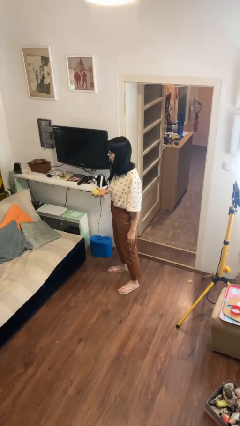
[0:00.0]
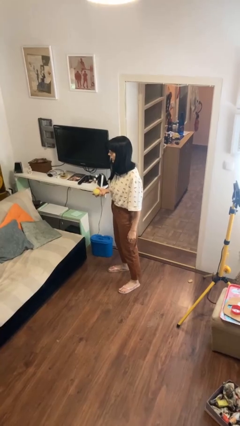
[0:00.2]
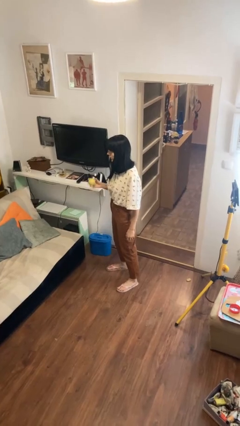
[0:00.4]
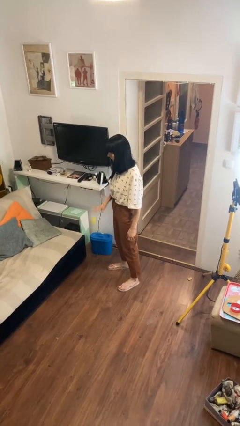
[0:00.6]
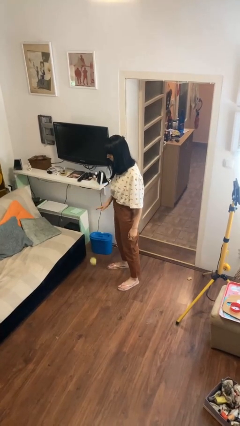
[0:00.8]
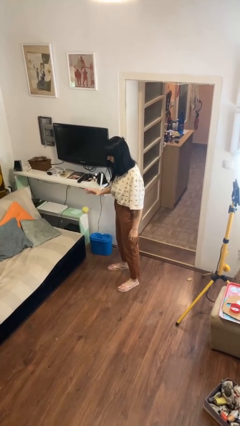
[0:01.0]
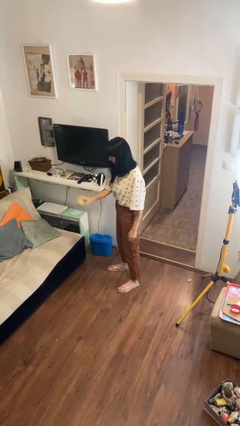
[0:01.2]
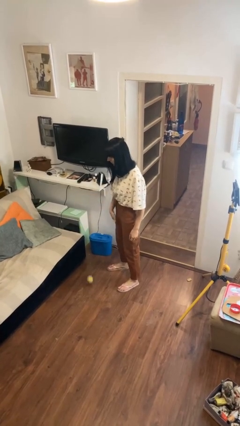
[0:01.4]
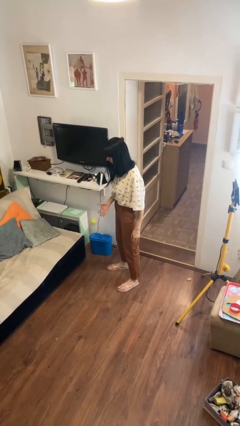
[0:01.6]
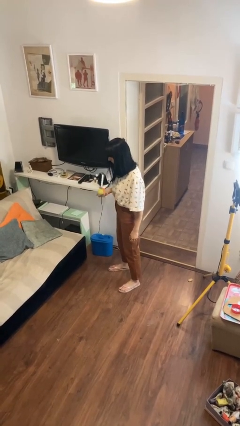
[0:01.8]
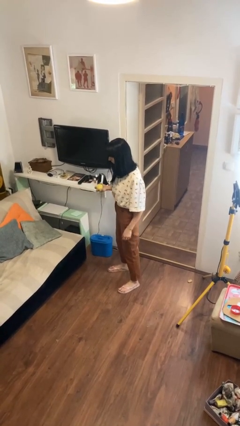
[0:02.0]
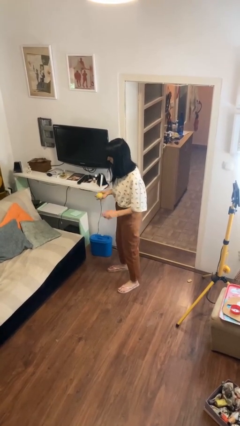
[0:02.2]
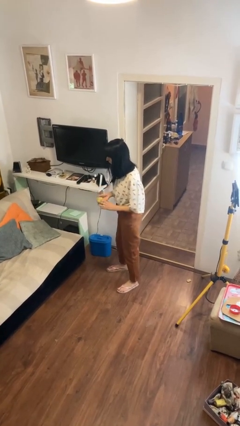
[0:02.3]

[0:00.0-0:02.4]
person bounces ball on floor

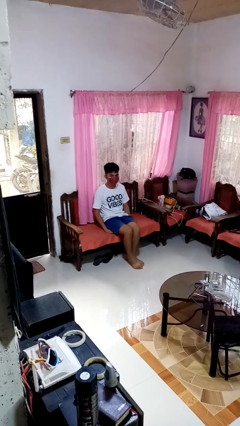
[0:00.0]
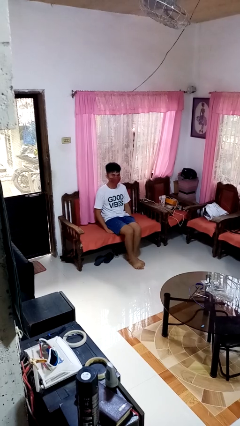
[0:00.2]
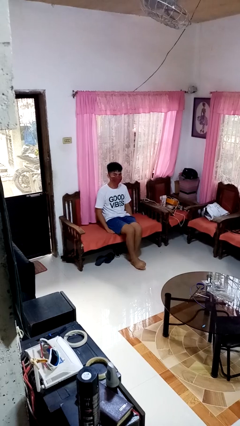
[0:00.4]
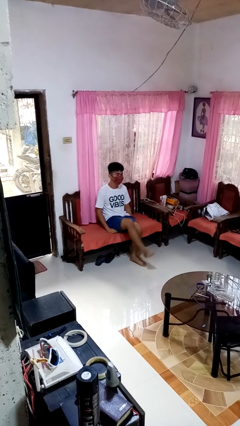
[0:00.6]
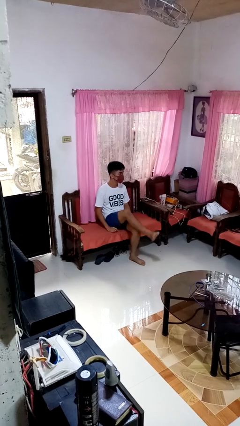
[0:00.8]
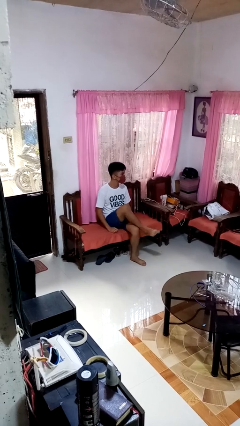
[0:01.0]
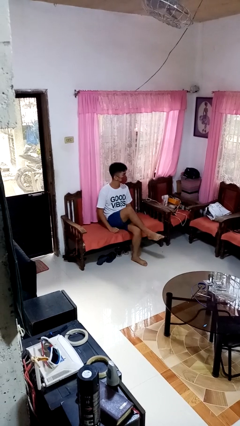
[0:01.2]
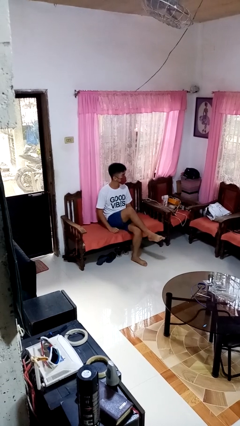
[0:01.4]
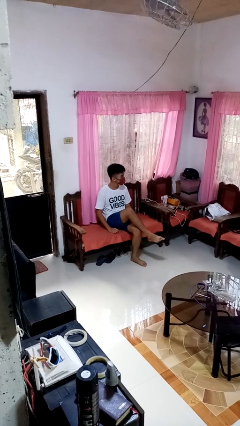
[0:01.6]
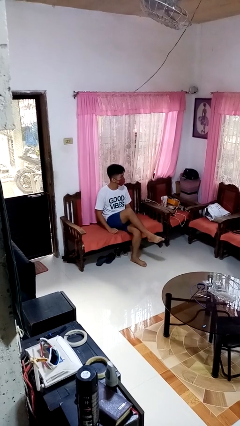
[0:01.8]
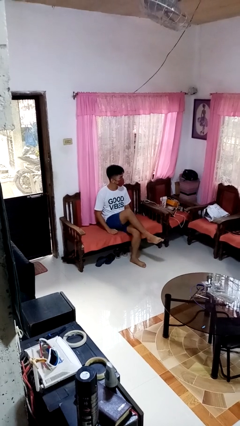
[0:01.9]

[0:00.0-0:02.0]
person crosses legs

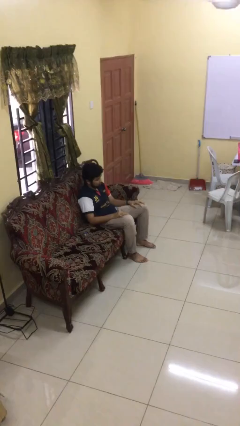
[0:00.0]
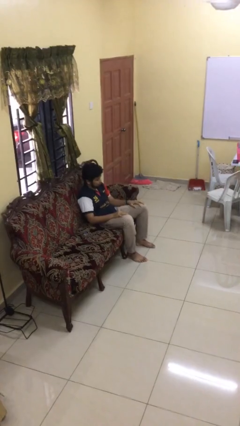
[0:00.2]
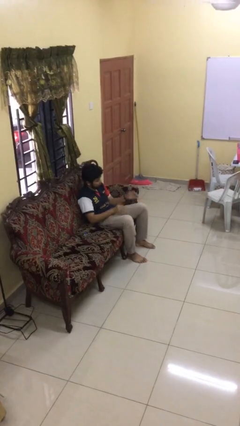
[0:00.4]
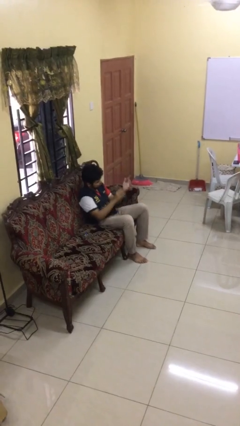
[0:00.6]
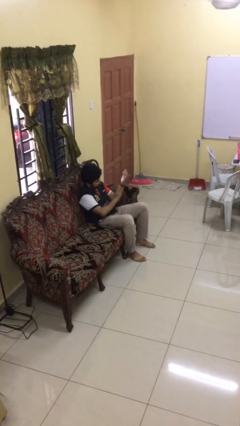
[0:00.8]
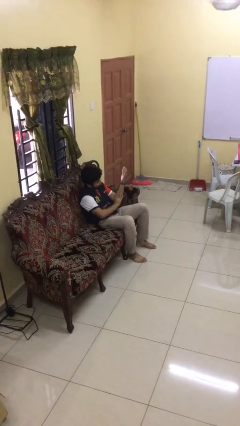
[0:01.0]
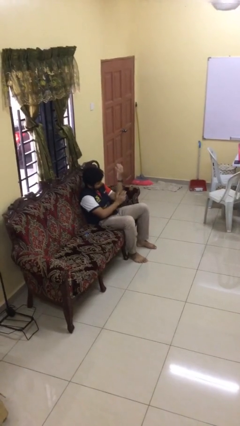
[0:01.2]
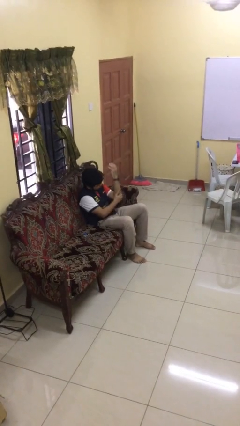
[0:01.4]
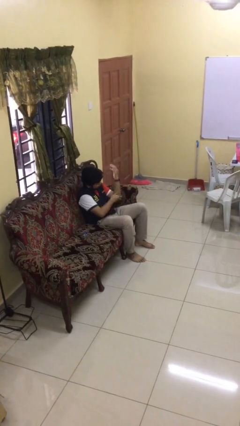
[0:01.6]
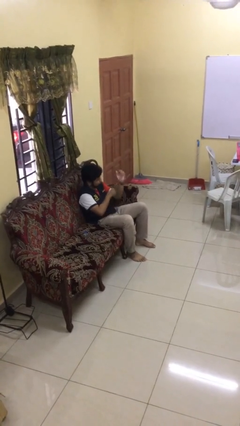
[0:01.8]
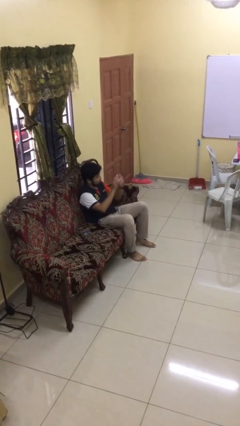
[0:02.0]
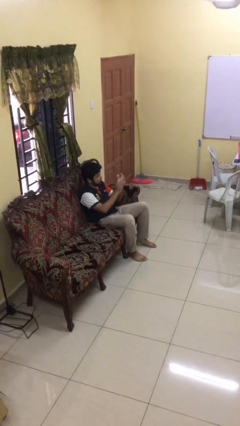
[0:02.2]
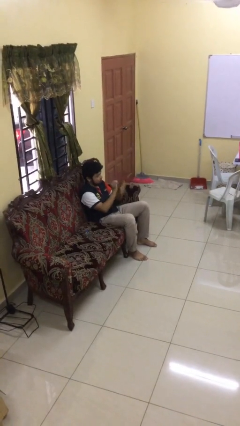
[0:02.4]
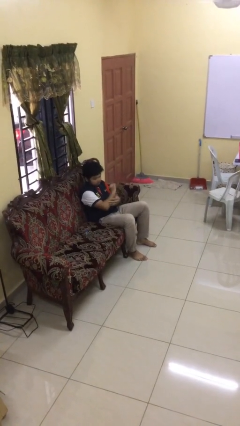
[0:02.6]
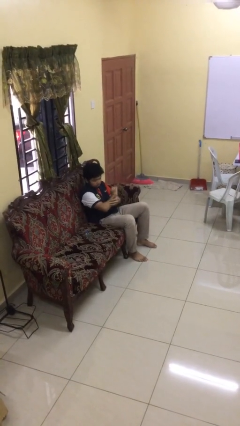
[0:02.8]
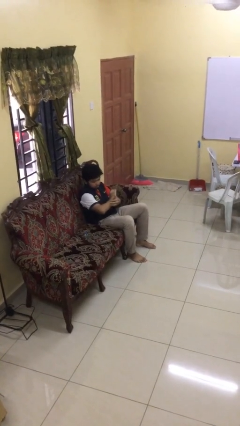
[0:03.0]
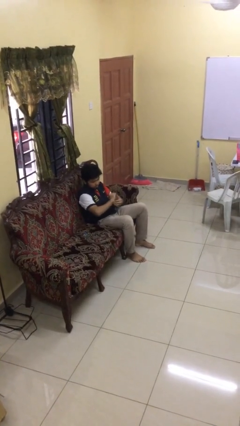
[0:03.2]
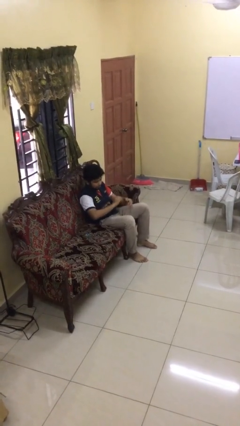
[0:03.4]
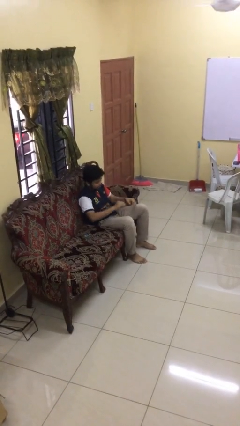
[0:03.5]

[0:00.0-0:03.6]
person looks at hands in lap

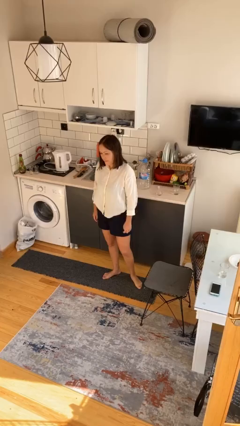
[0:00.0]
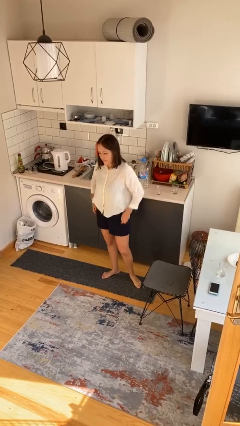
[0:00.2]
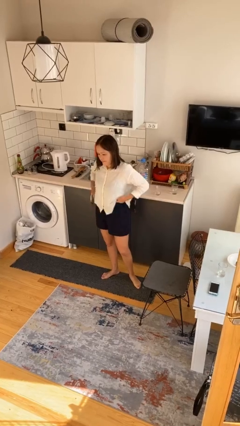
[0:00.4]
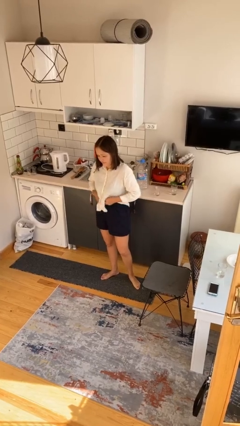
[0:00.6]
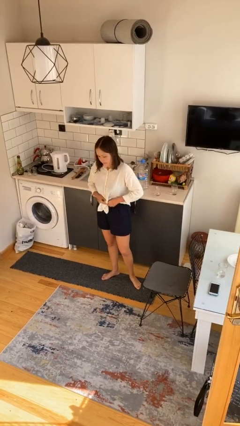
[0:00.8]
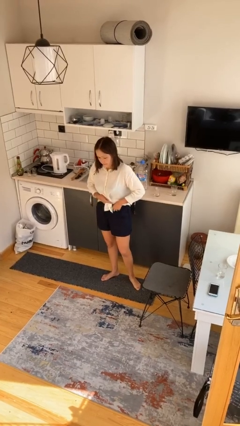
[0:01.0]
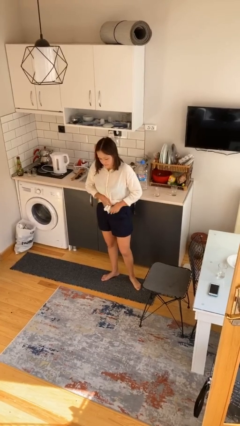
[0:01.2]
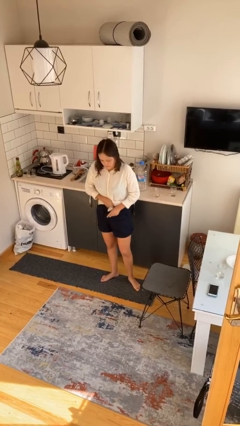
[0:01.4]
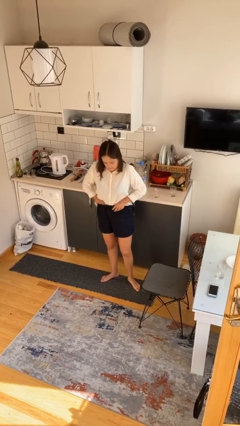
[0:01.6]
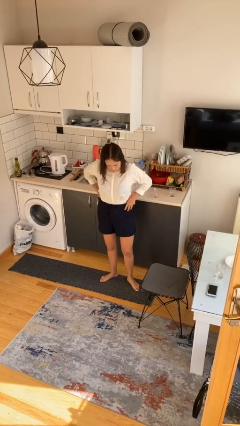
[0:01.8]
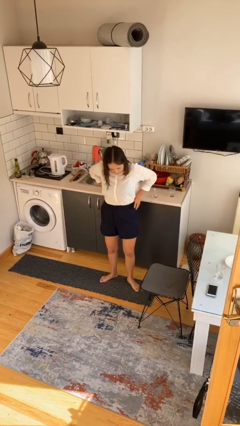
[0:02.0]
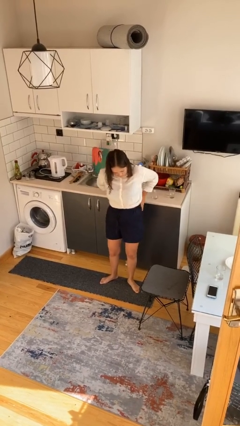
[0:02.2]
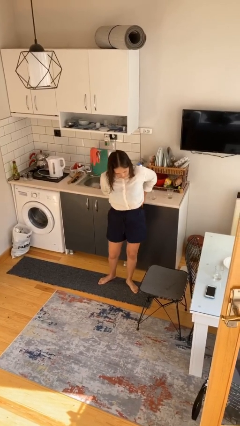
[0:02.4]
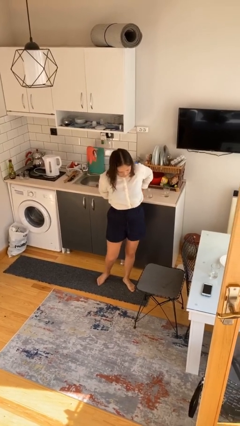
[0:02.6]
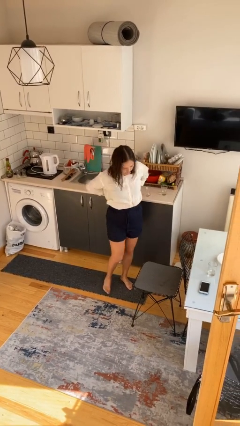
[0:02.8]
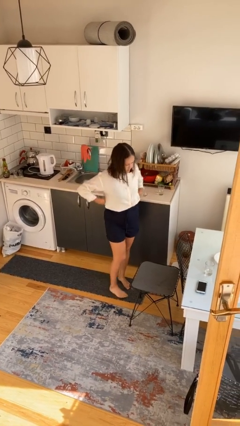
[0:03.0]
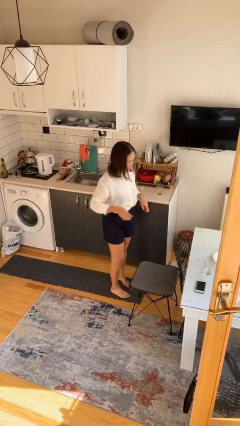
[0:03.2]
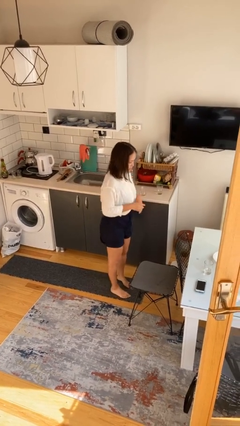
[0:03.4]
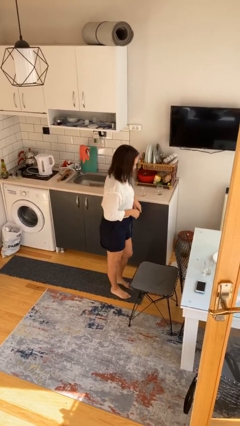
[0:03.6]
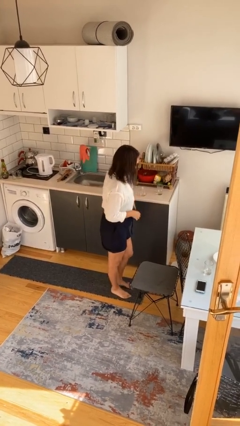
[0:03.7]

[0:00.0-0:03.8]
person tucks in shirt

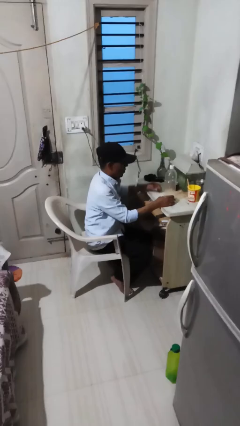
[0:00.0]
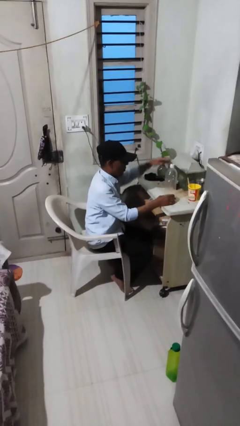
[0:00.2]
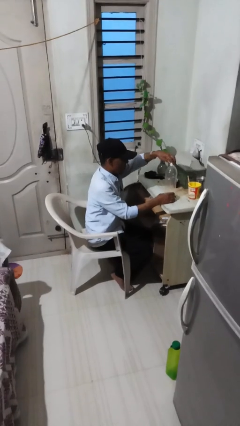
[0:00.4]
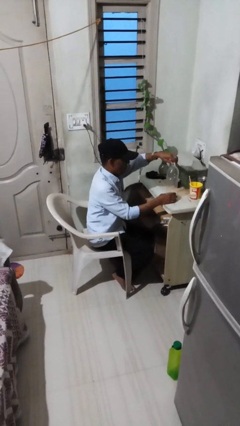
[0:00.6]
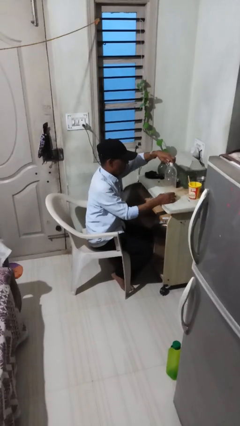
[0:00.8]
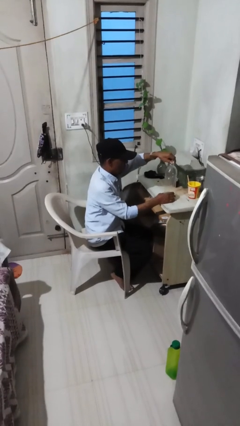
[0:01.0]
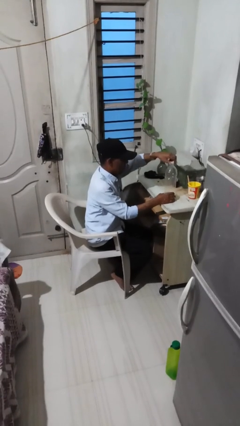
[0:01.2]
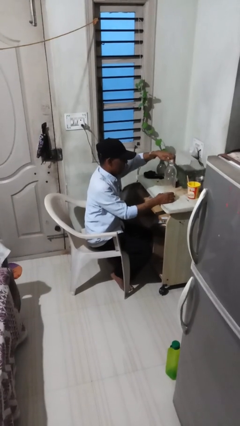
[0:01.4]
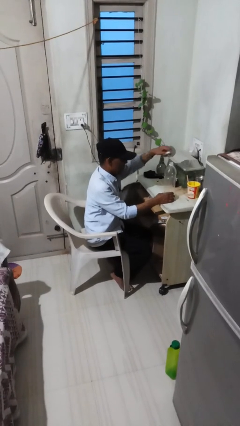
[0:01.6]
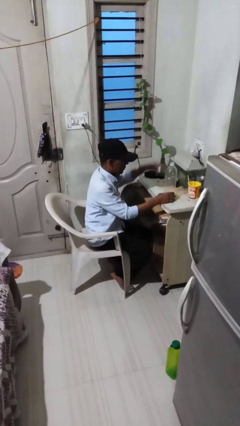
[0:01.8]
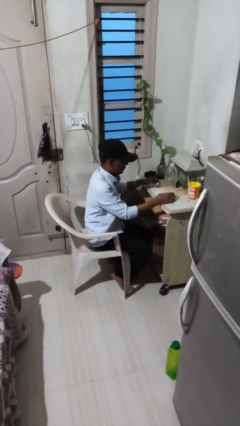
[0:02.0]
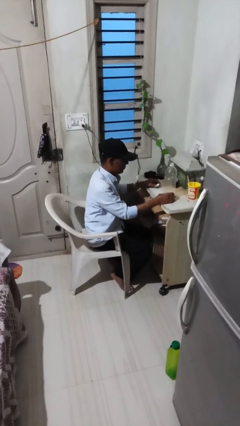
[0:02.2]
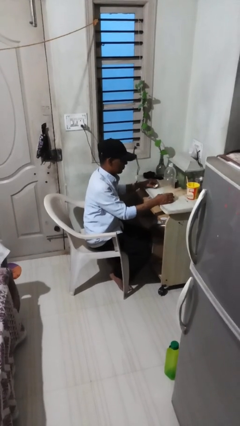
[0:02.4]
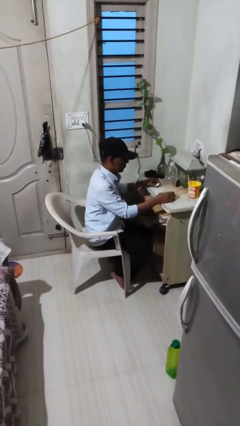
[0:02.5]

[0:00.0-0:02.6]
person unscrews lid from bottle

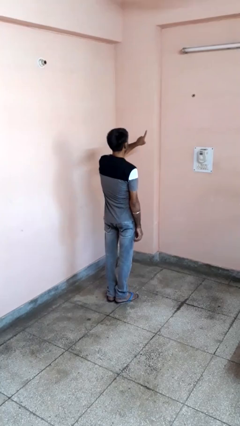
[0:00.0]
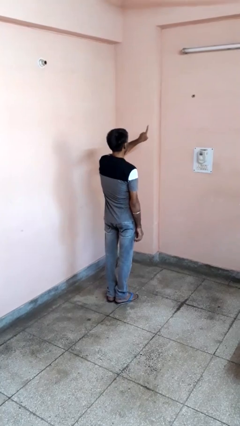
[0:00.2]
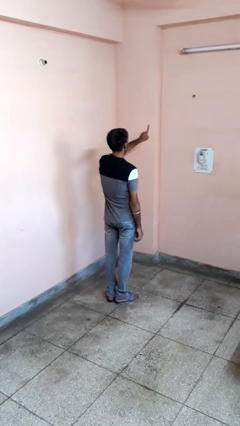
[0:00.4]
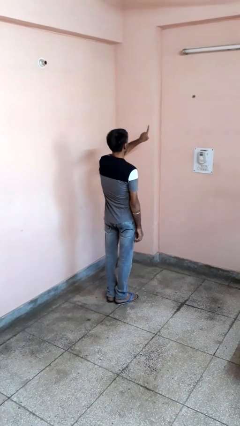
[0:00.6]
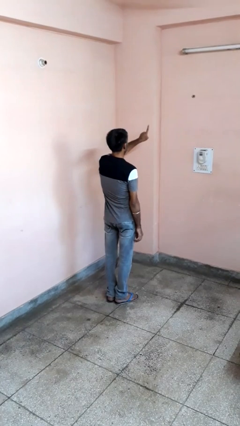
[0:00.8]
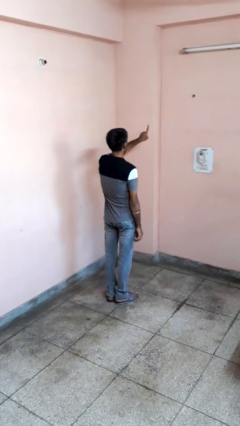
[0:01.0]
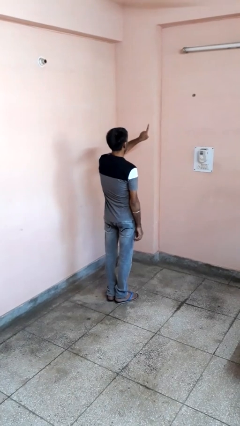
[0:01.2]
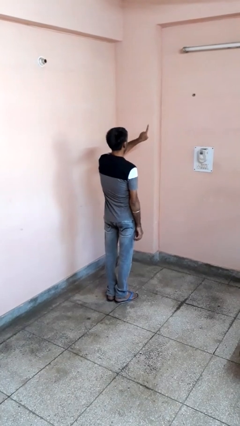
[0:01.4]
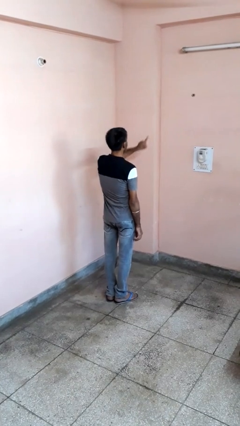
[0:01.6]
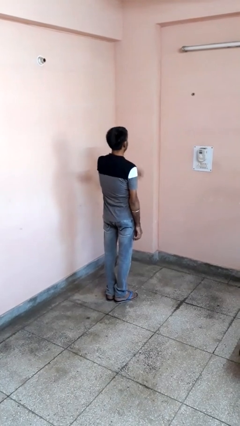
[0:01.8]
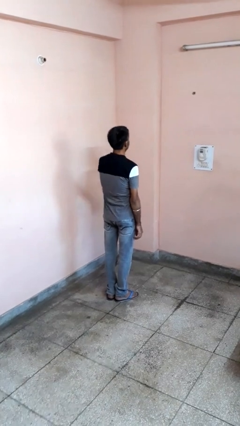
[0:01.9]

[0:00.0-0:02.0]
person gestures number one

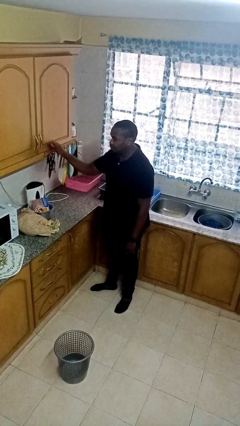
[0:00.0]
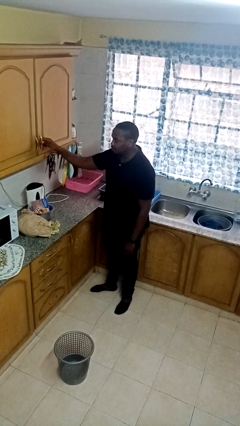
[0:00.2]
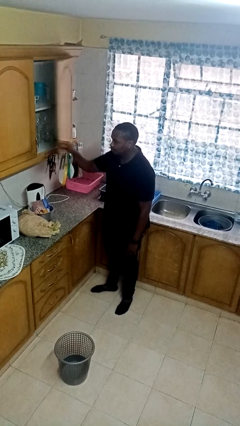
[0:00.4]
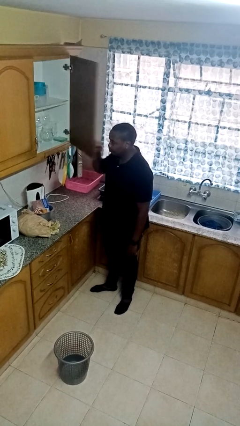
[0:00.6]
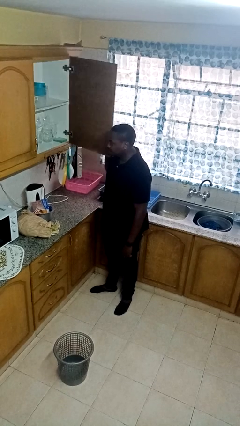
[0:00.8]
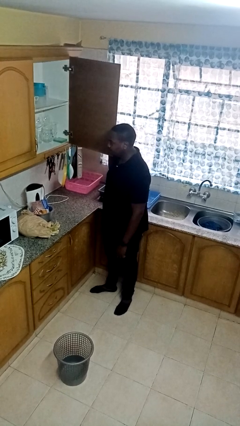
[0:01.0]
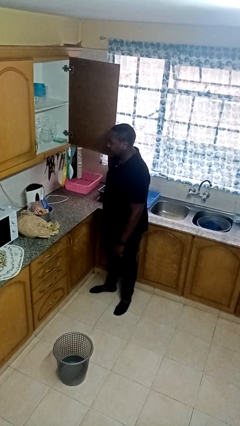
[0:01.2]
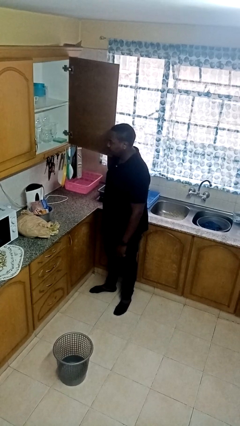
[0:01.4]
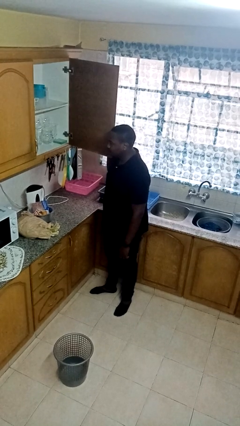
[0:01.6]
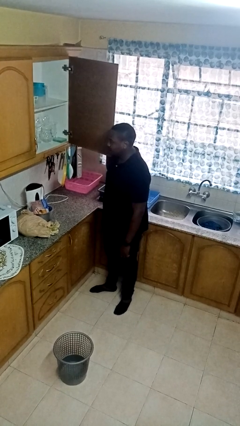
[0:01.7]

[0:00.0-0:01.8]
person opens cabinet
